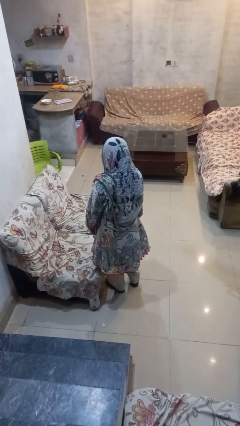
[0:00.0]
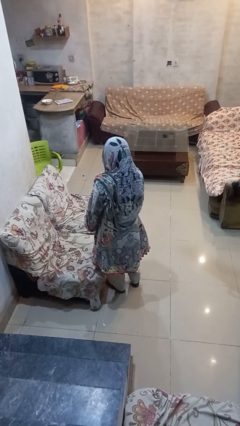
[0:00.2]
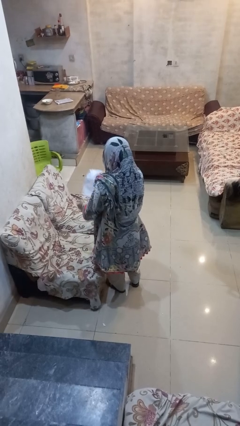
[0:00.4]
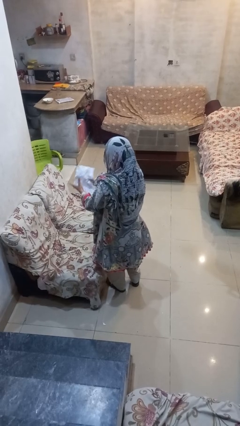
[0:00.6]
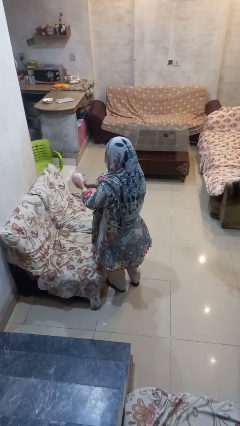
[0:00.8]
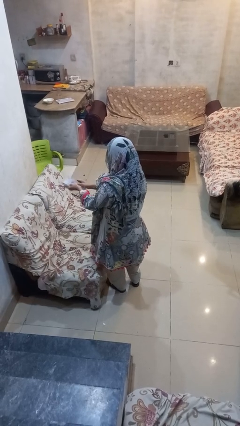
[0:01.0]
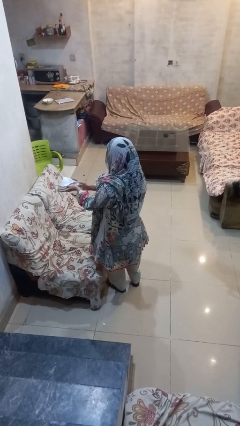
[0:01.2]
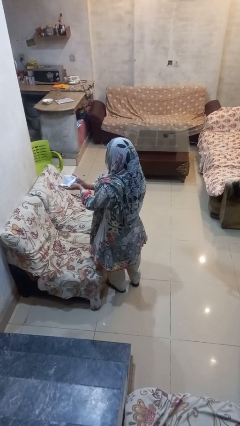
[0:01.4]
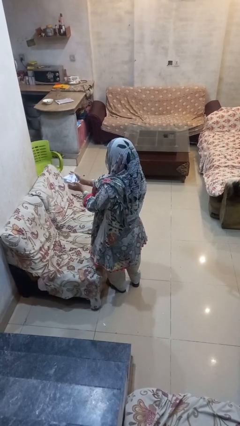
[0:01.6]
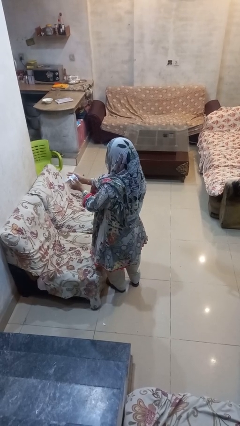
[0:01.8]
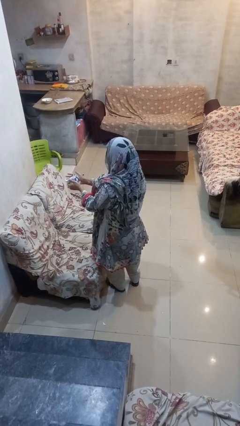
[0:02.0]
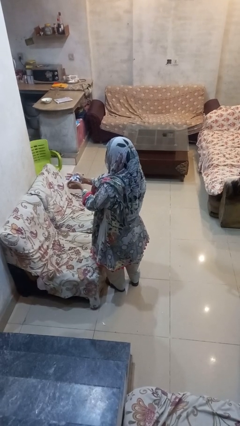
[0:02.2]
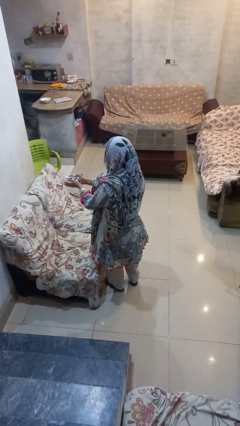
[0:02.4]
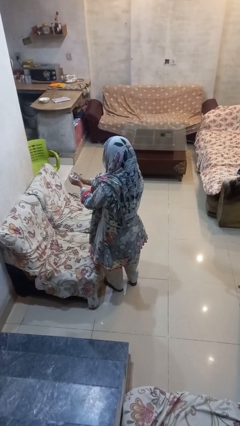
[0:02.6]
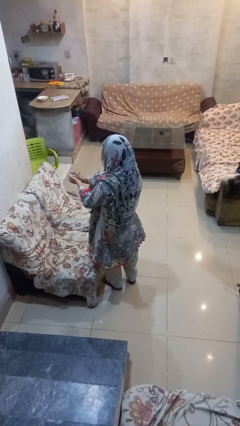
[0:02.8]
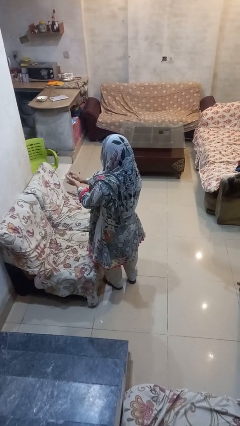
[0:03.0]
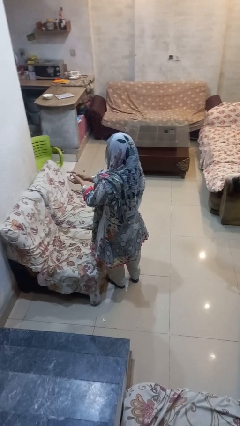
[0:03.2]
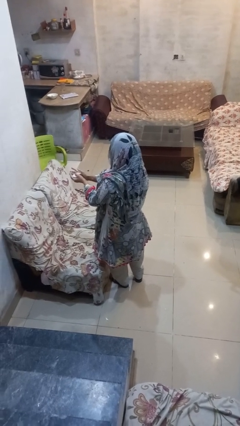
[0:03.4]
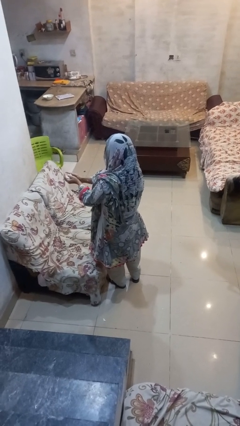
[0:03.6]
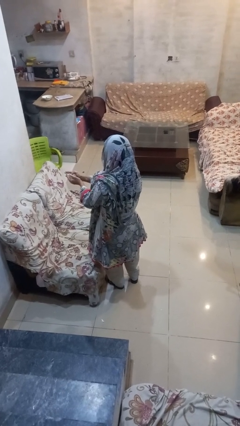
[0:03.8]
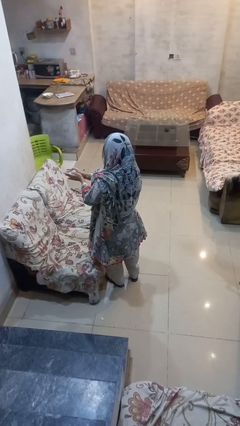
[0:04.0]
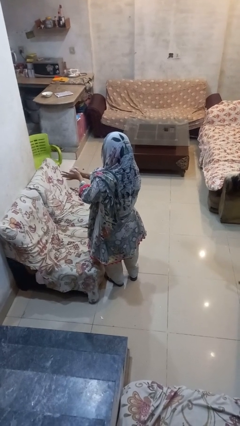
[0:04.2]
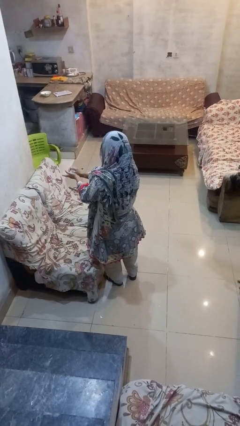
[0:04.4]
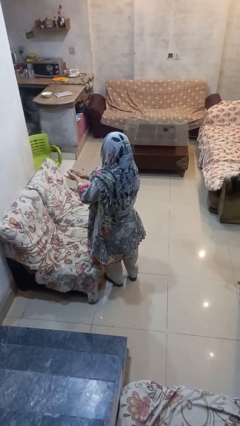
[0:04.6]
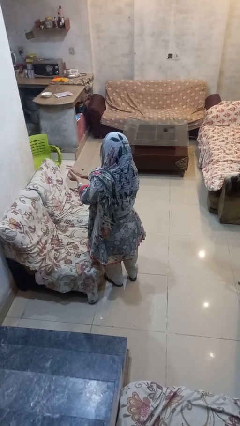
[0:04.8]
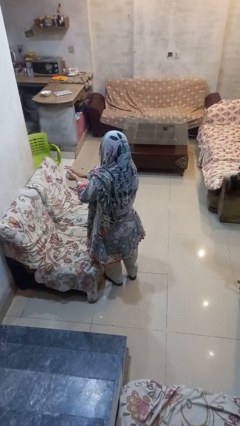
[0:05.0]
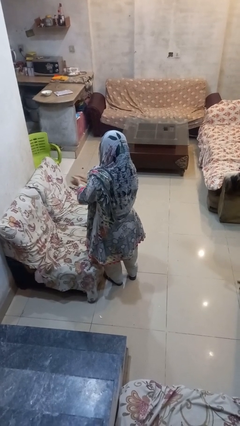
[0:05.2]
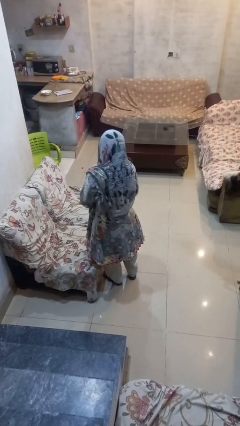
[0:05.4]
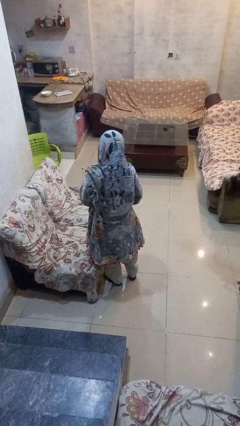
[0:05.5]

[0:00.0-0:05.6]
person crumples paper

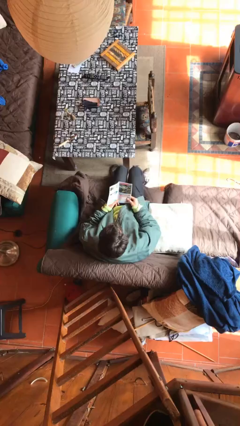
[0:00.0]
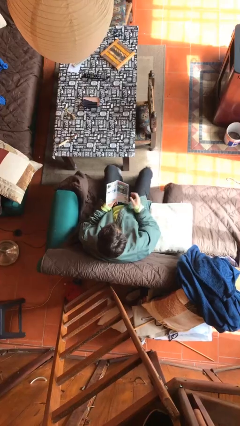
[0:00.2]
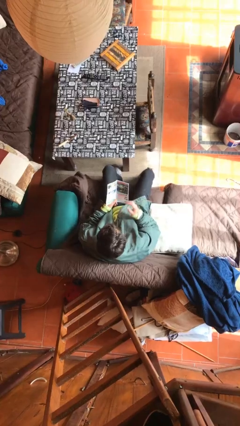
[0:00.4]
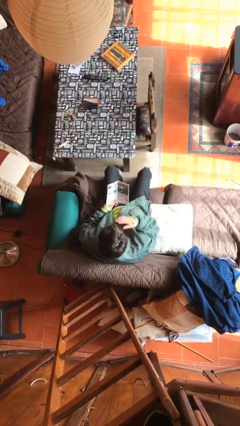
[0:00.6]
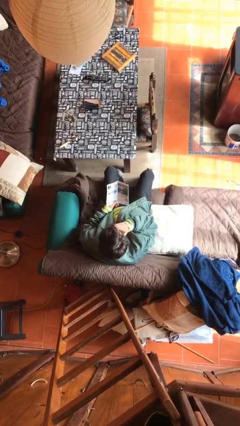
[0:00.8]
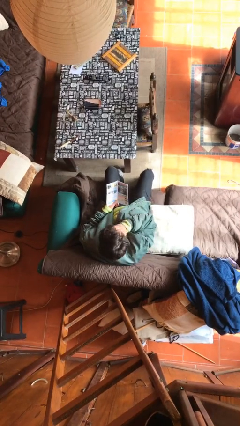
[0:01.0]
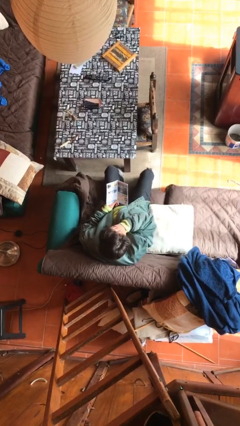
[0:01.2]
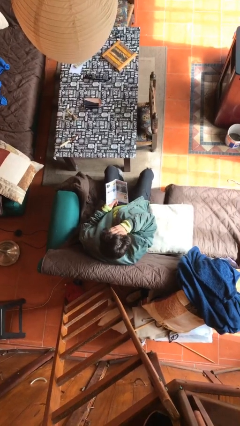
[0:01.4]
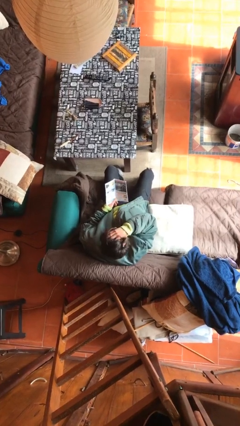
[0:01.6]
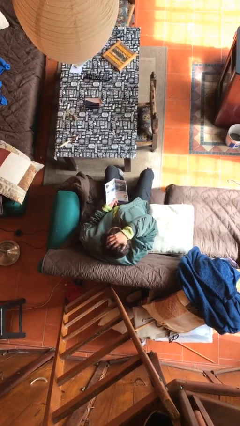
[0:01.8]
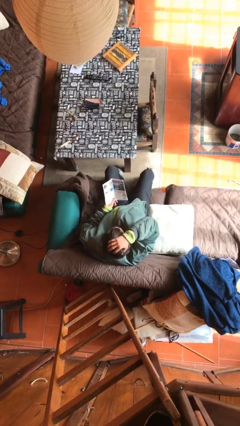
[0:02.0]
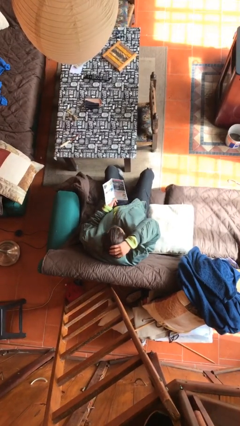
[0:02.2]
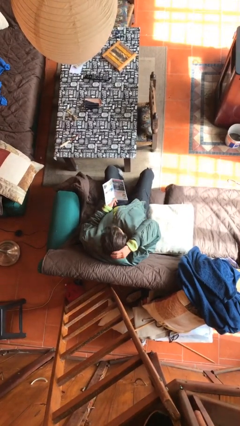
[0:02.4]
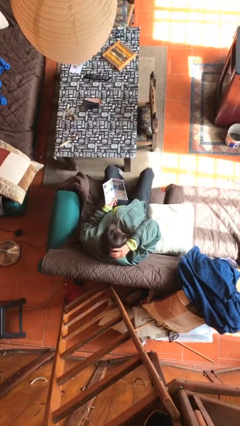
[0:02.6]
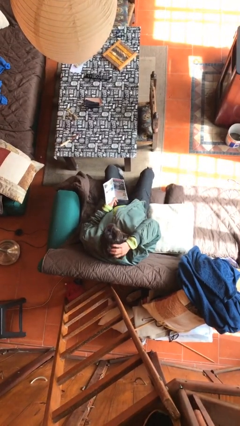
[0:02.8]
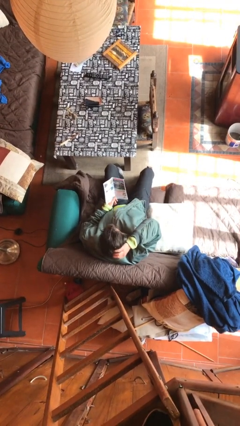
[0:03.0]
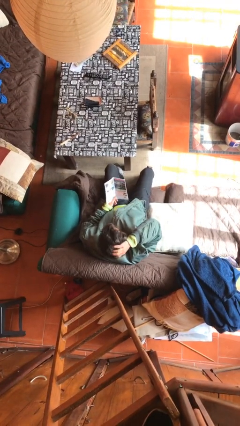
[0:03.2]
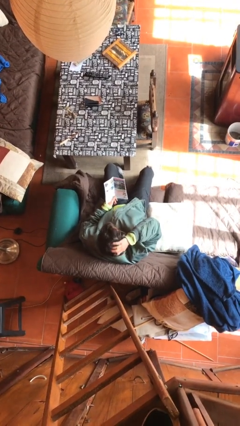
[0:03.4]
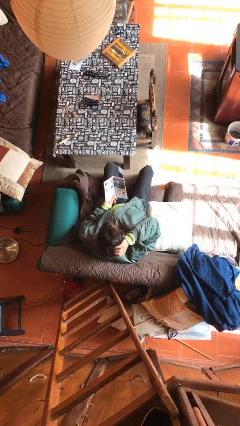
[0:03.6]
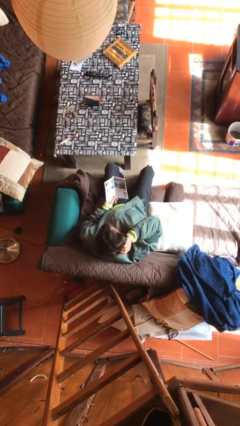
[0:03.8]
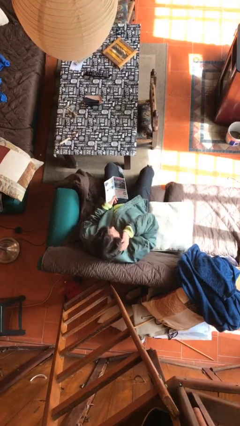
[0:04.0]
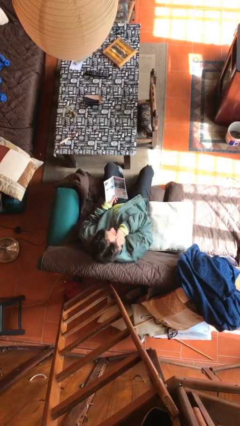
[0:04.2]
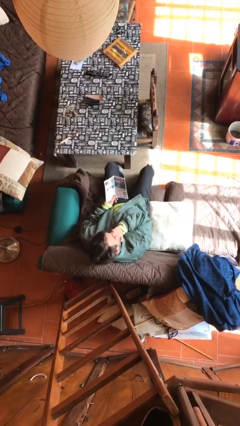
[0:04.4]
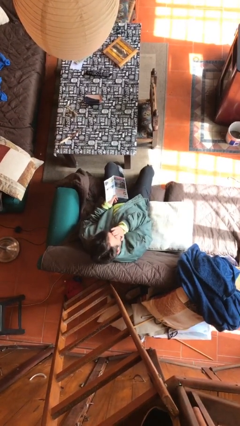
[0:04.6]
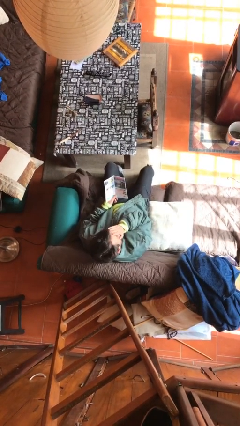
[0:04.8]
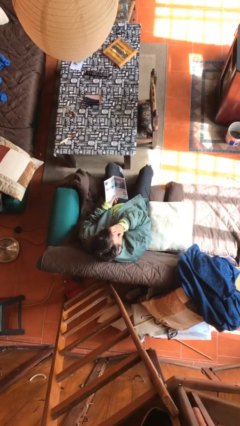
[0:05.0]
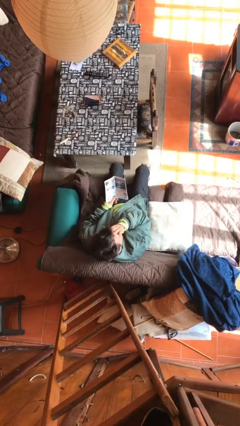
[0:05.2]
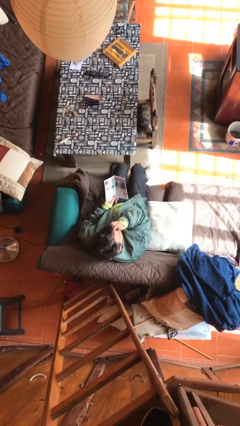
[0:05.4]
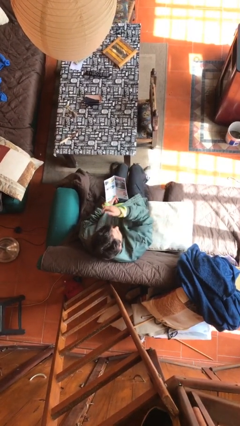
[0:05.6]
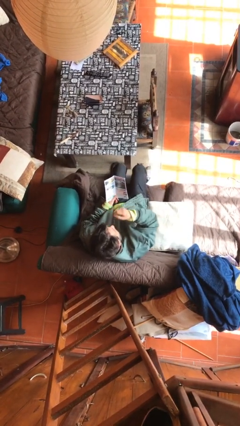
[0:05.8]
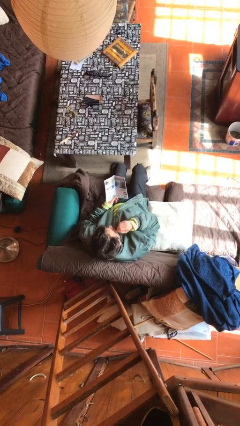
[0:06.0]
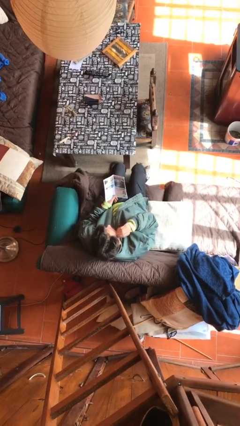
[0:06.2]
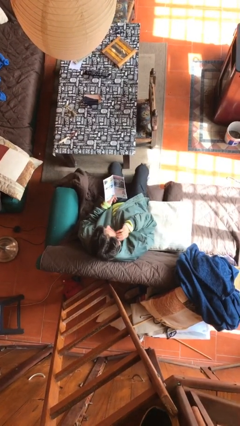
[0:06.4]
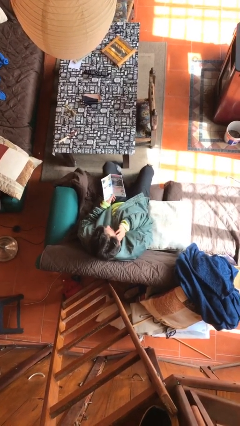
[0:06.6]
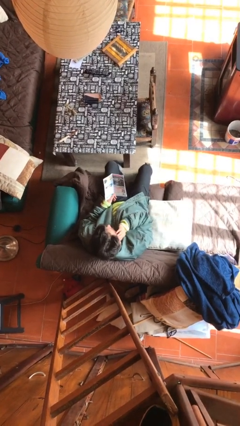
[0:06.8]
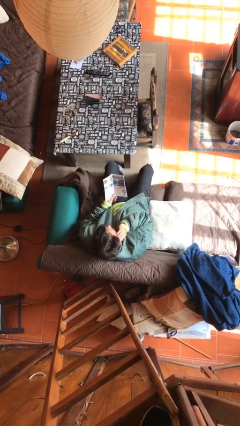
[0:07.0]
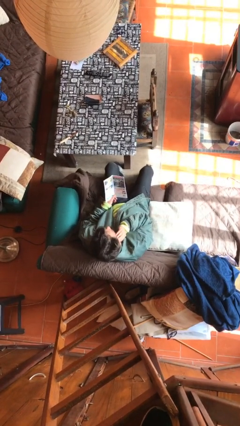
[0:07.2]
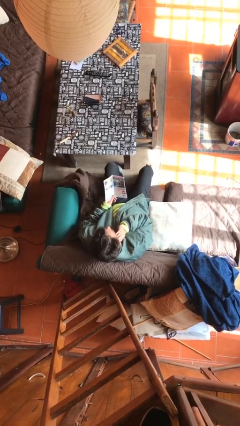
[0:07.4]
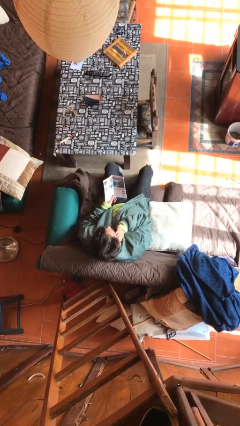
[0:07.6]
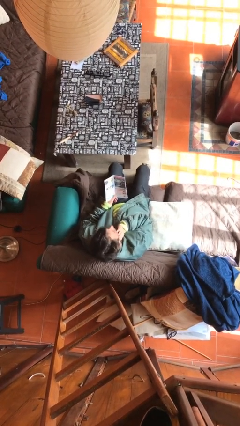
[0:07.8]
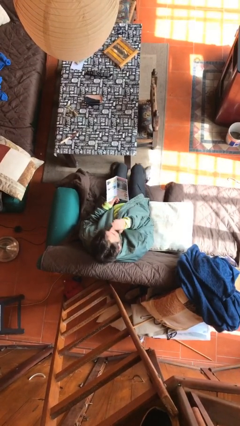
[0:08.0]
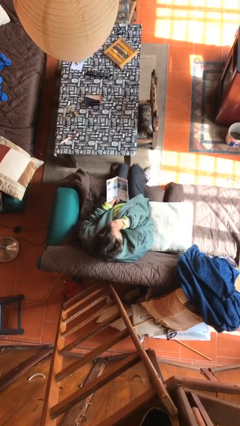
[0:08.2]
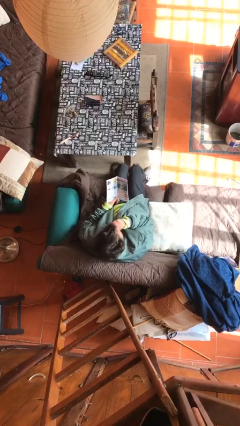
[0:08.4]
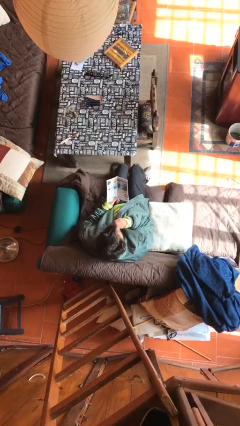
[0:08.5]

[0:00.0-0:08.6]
person reads document

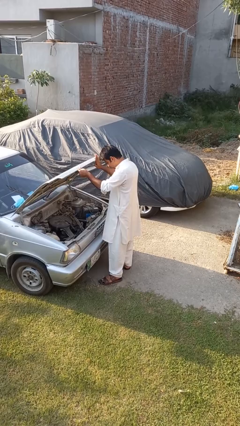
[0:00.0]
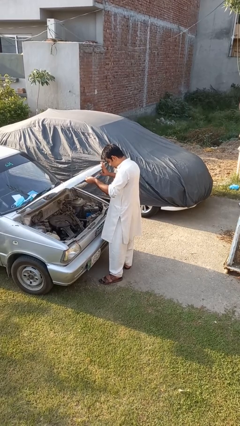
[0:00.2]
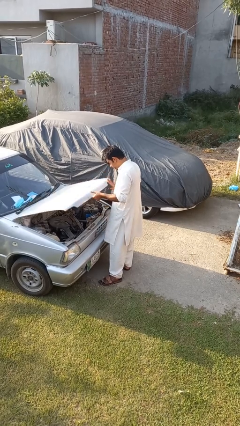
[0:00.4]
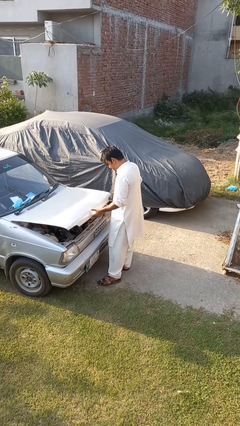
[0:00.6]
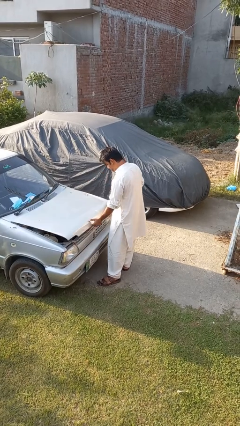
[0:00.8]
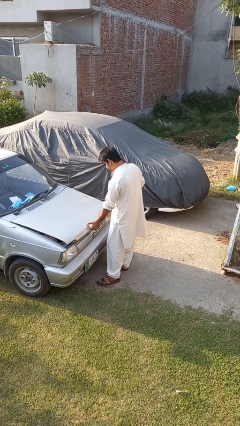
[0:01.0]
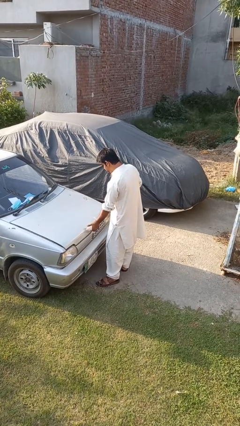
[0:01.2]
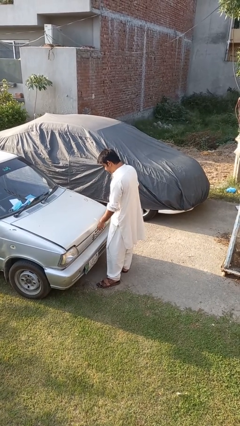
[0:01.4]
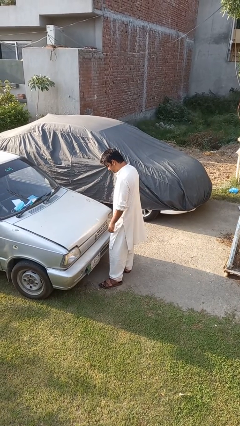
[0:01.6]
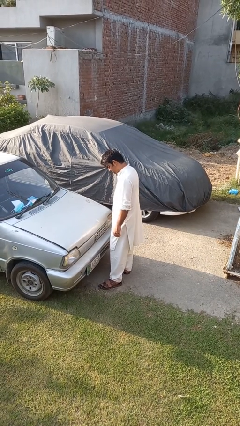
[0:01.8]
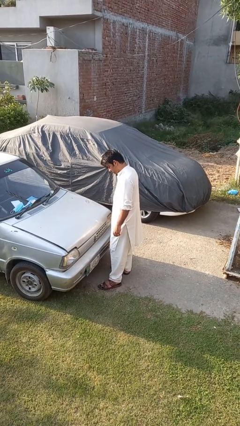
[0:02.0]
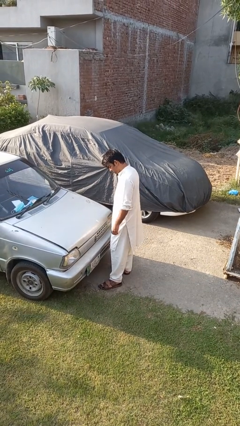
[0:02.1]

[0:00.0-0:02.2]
person closes car hood

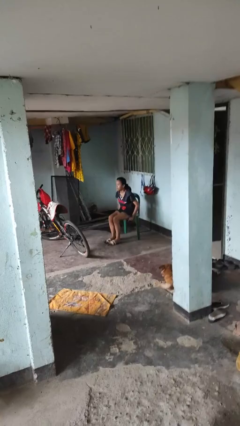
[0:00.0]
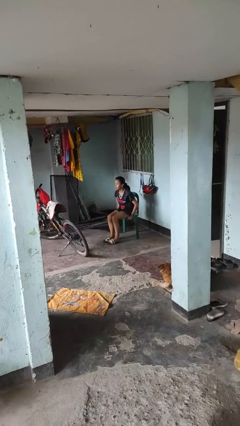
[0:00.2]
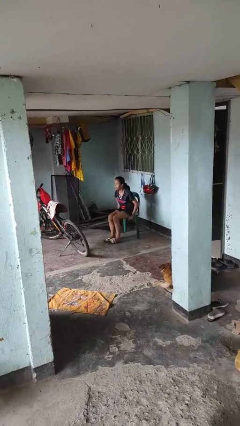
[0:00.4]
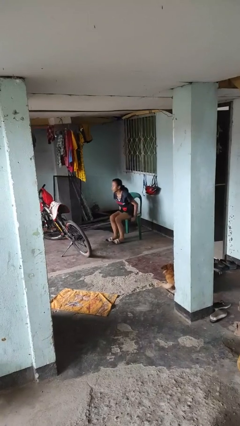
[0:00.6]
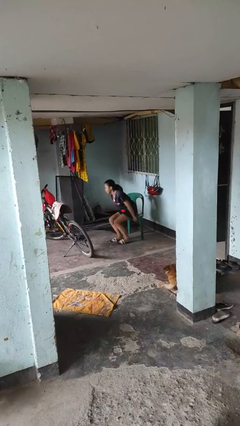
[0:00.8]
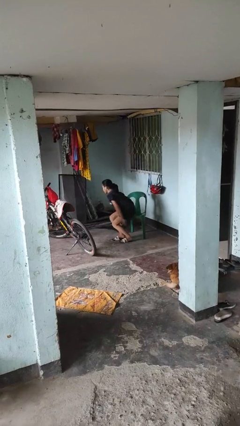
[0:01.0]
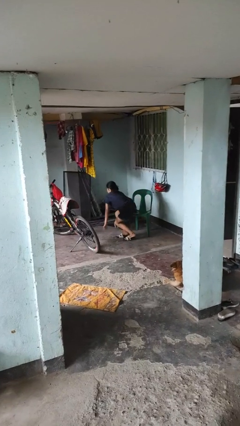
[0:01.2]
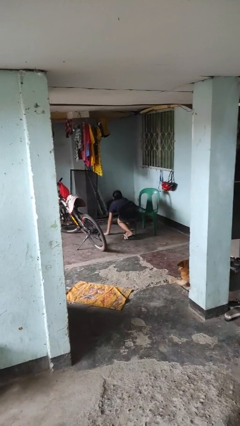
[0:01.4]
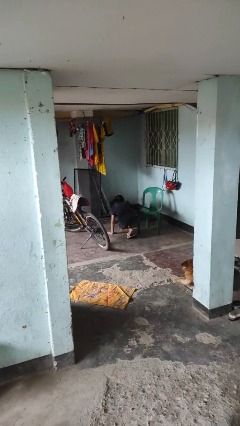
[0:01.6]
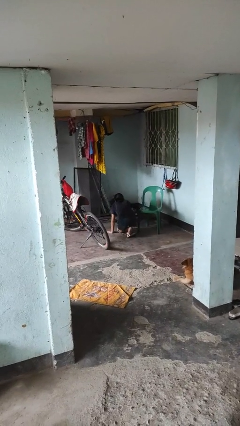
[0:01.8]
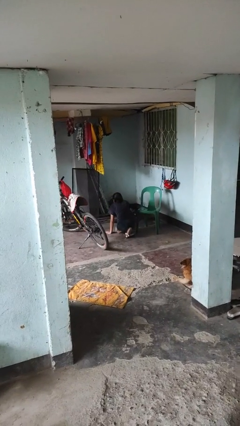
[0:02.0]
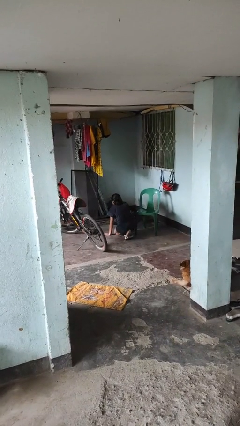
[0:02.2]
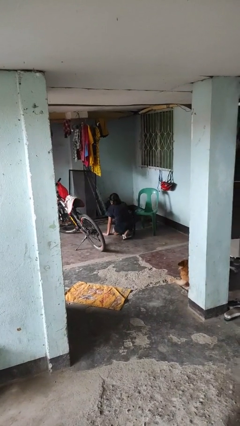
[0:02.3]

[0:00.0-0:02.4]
person falls from chair
